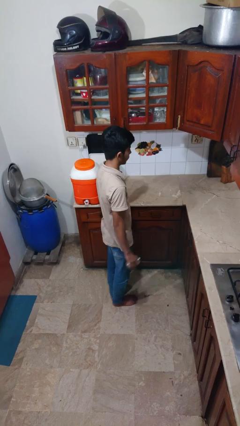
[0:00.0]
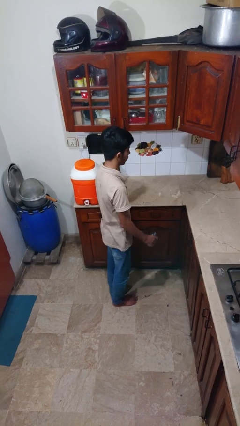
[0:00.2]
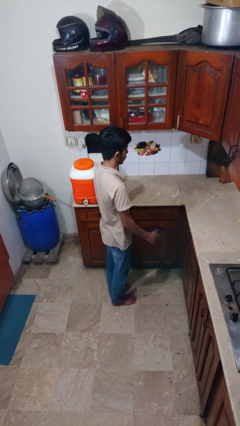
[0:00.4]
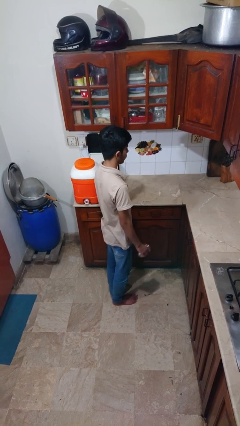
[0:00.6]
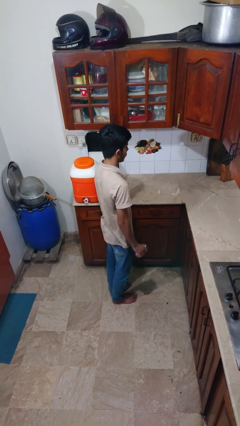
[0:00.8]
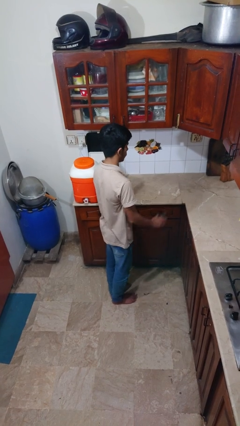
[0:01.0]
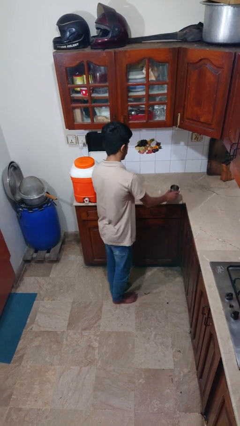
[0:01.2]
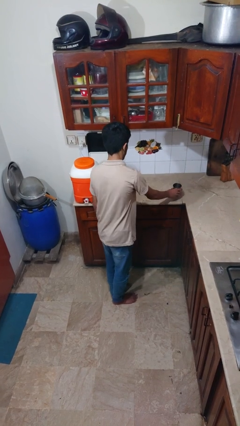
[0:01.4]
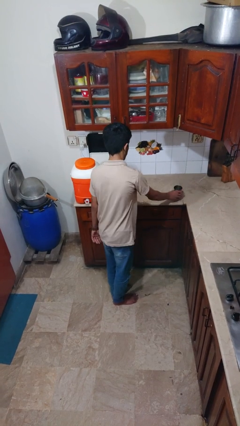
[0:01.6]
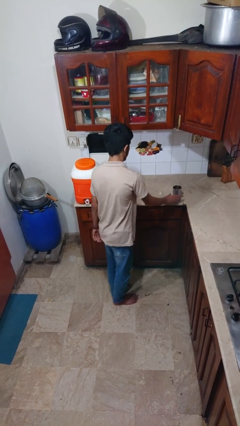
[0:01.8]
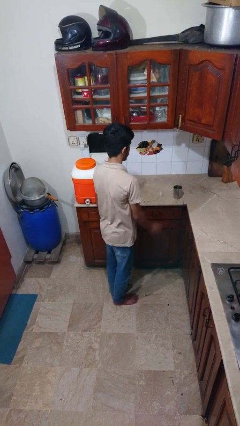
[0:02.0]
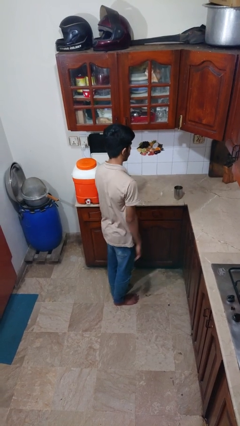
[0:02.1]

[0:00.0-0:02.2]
person puts down object on countertop

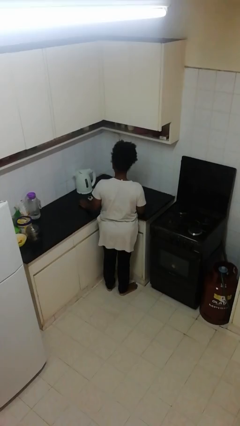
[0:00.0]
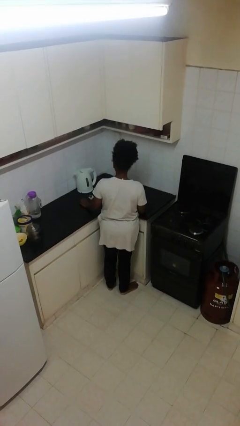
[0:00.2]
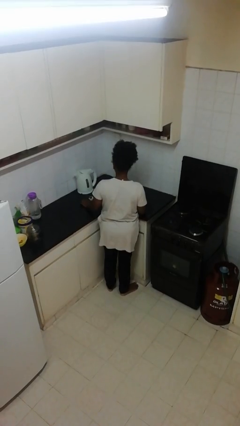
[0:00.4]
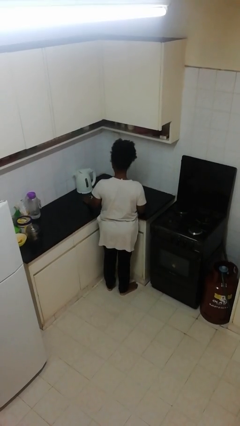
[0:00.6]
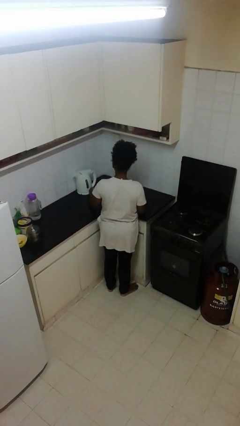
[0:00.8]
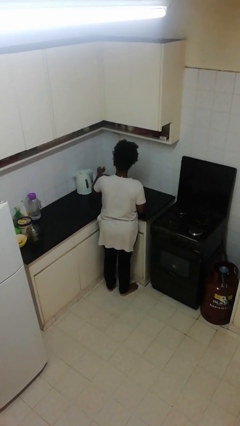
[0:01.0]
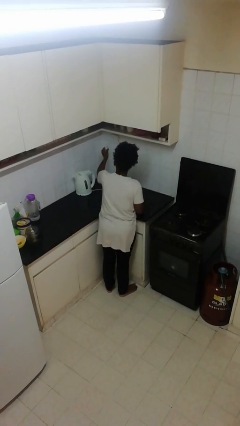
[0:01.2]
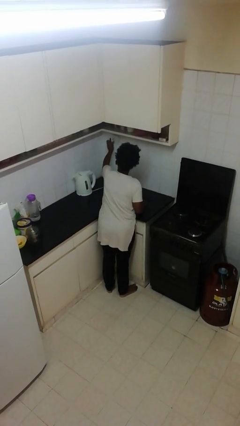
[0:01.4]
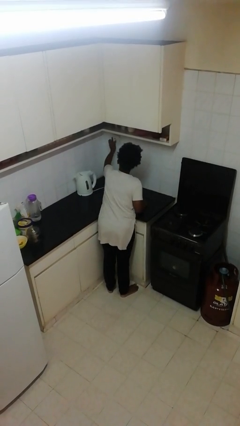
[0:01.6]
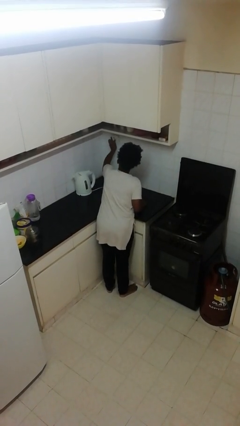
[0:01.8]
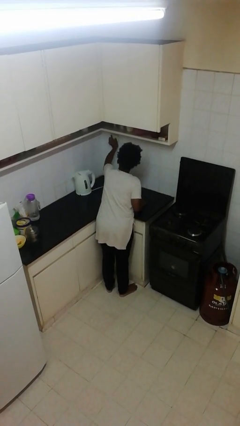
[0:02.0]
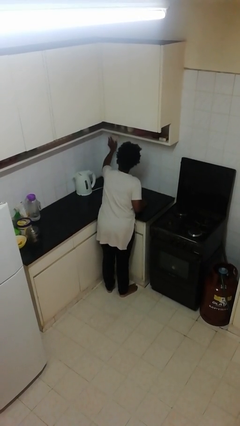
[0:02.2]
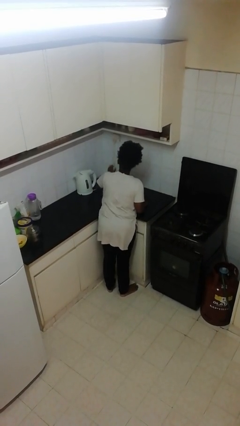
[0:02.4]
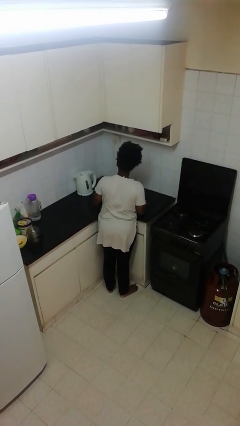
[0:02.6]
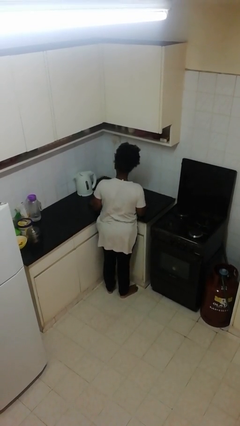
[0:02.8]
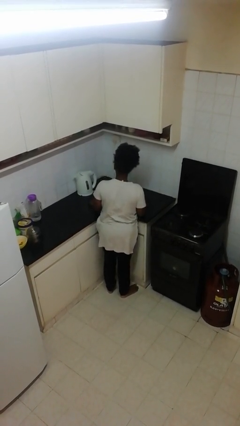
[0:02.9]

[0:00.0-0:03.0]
person plugs into electrical socket

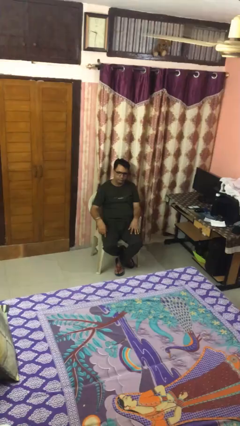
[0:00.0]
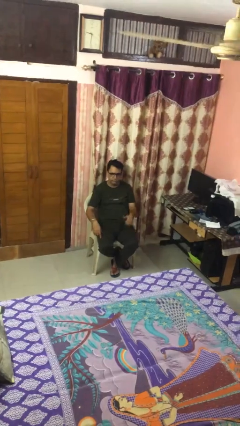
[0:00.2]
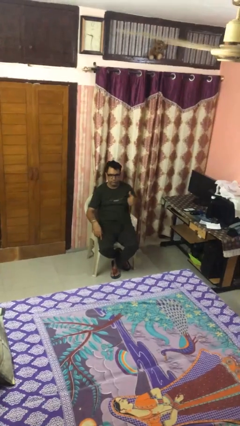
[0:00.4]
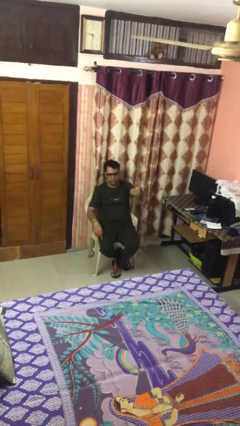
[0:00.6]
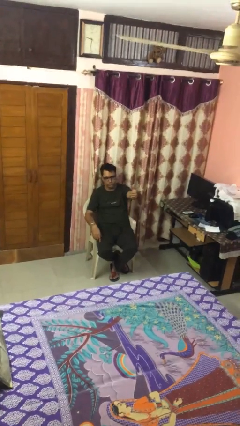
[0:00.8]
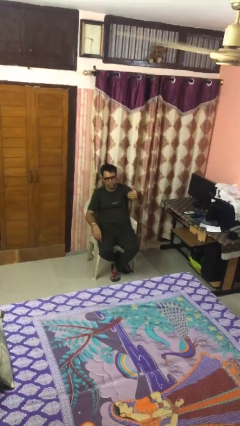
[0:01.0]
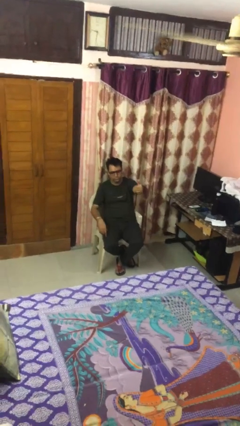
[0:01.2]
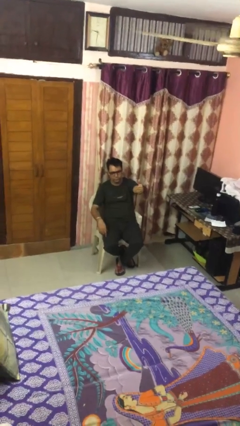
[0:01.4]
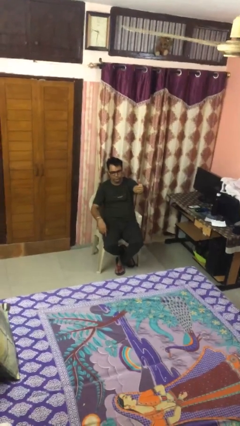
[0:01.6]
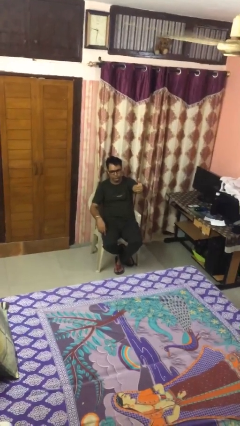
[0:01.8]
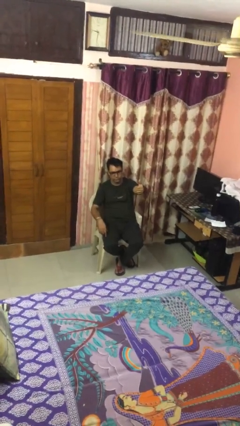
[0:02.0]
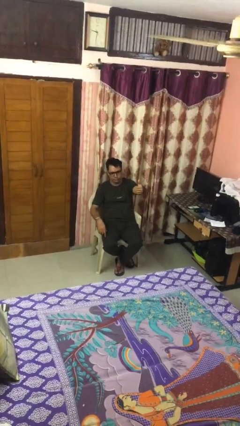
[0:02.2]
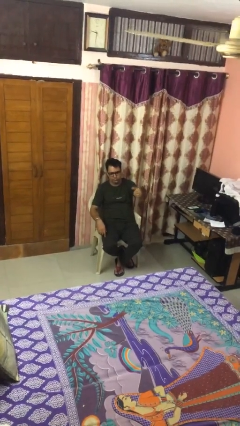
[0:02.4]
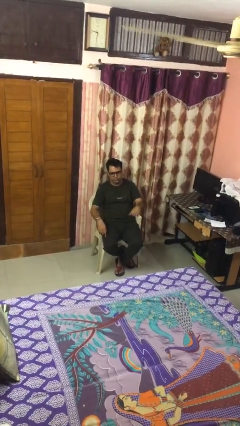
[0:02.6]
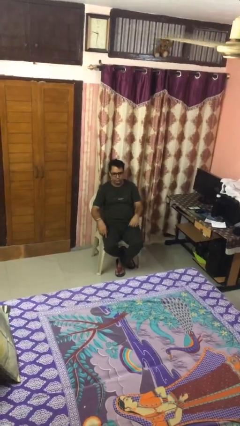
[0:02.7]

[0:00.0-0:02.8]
person gestures thumbs up

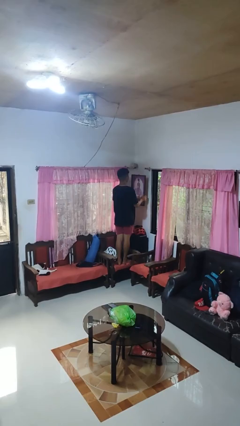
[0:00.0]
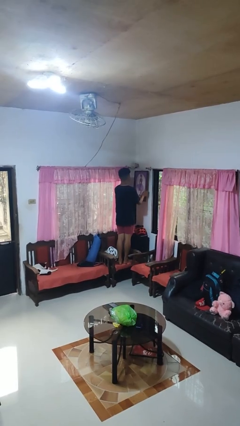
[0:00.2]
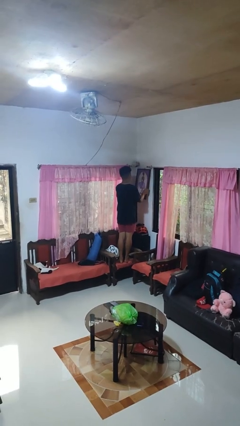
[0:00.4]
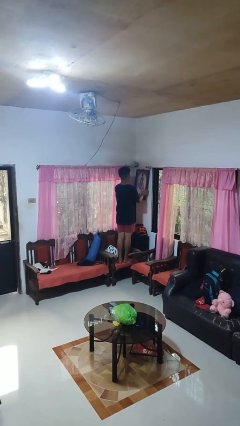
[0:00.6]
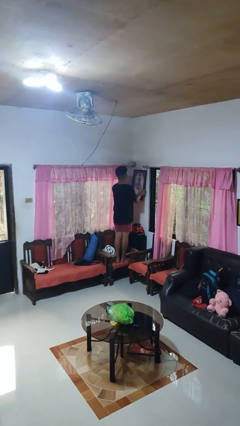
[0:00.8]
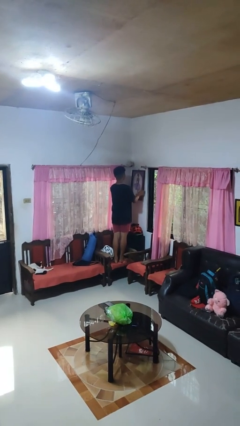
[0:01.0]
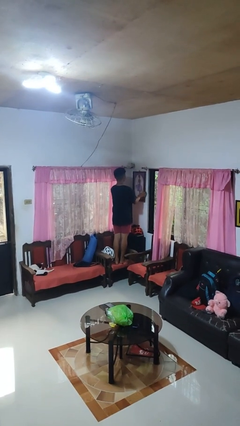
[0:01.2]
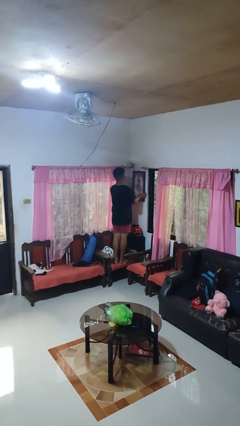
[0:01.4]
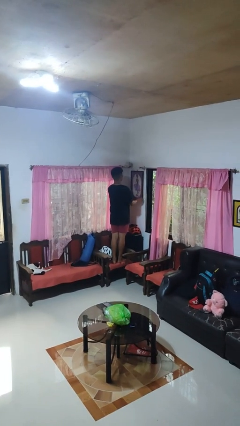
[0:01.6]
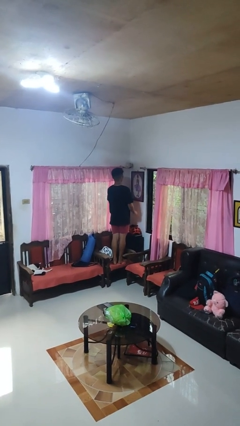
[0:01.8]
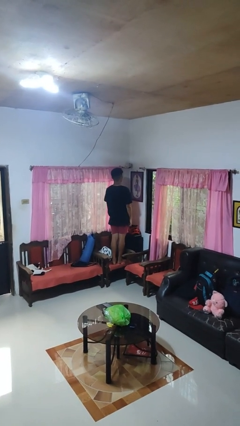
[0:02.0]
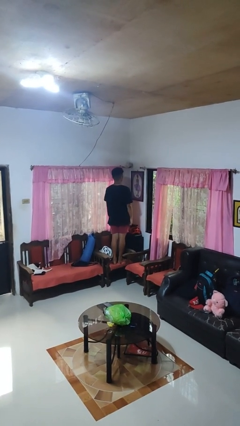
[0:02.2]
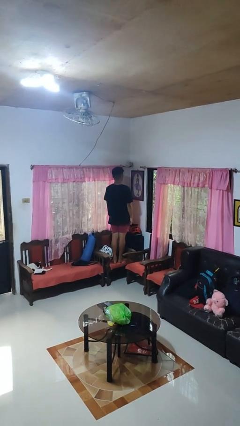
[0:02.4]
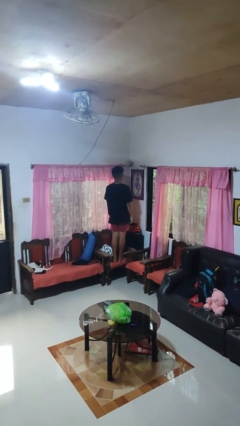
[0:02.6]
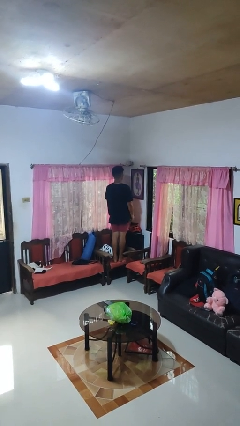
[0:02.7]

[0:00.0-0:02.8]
person puts up picture frame

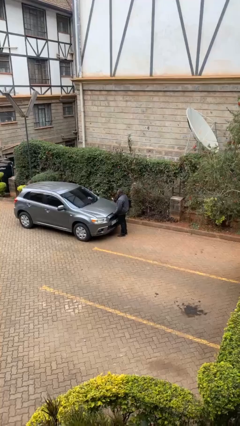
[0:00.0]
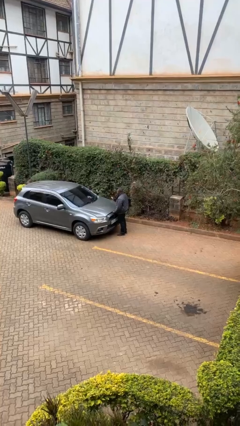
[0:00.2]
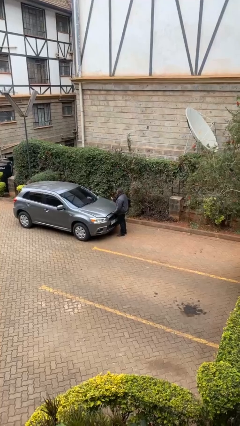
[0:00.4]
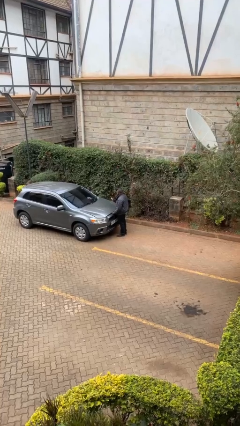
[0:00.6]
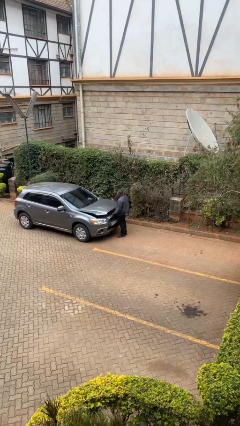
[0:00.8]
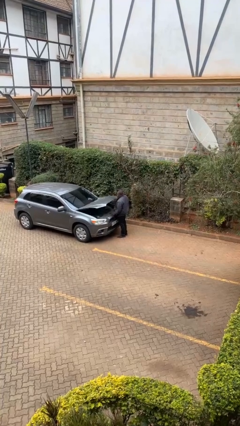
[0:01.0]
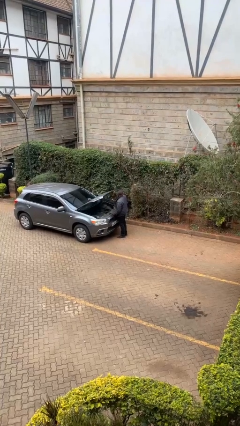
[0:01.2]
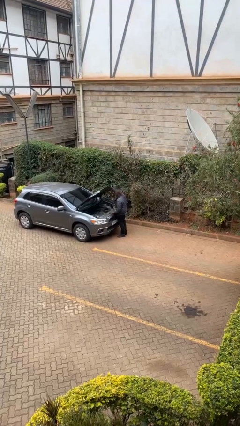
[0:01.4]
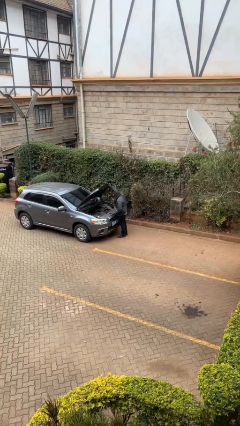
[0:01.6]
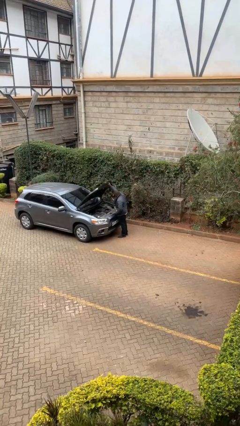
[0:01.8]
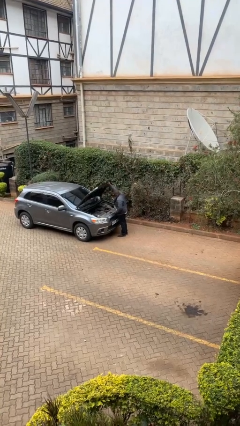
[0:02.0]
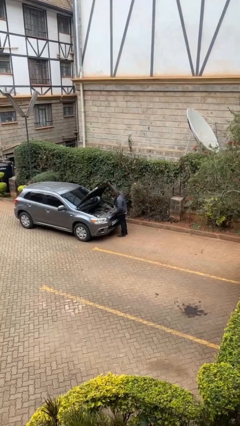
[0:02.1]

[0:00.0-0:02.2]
person opens car hood

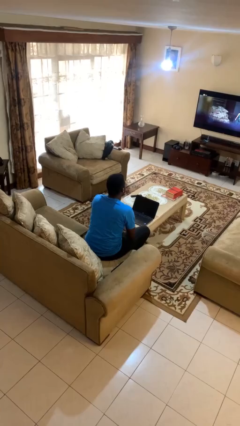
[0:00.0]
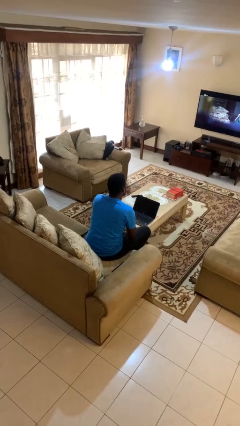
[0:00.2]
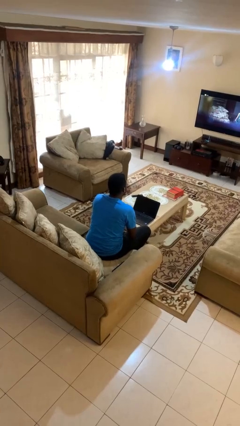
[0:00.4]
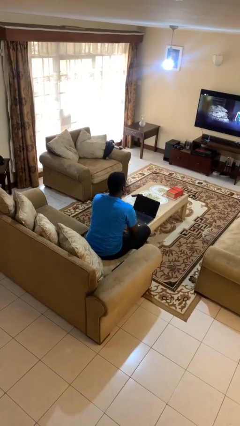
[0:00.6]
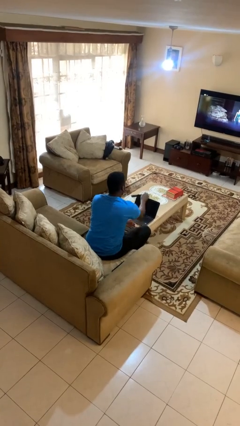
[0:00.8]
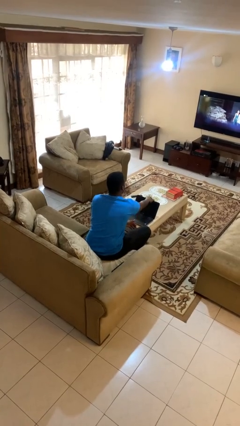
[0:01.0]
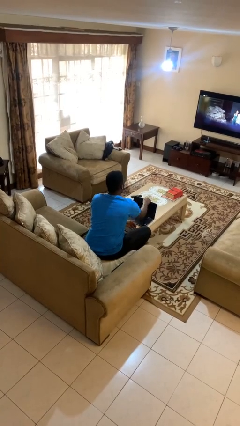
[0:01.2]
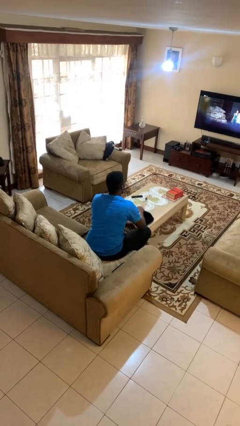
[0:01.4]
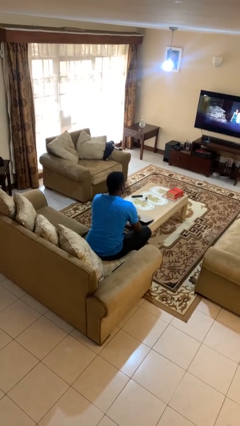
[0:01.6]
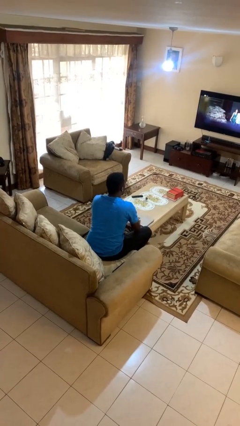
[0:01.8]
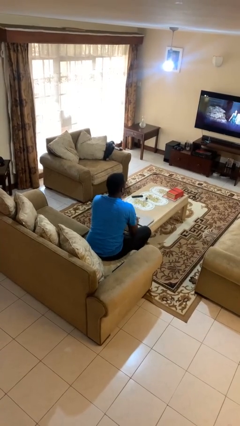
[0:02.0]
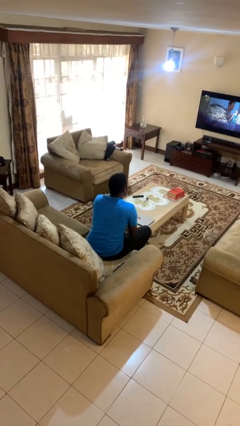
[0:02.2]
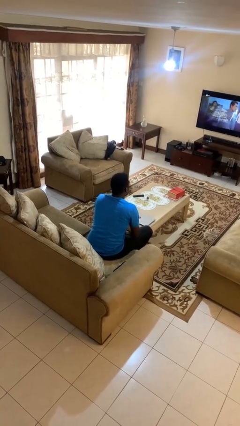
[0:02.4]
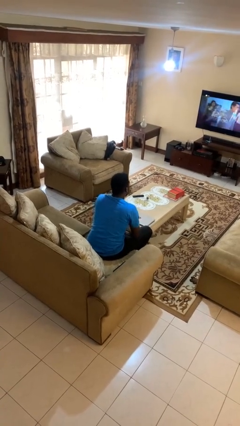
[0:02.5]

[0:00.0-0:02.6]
person closes laptop

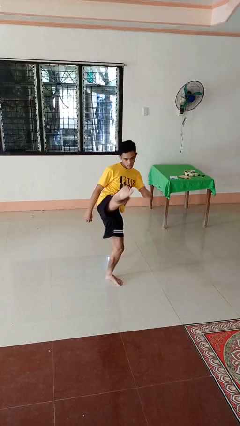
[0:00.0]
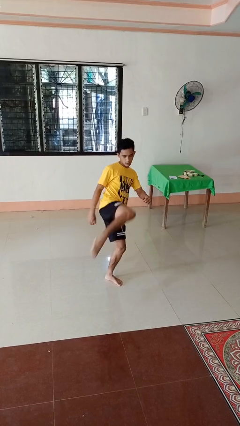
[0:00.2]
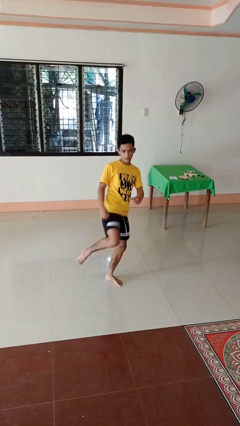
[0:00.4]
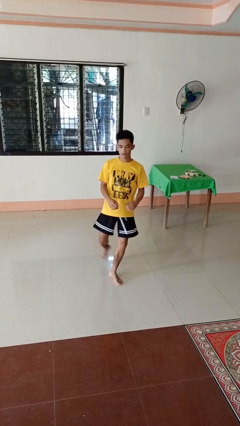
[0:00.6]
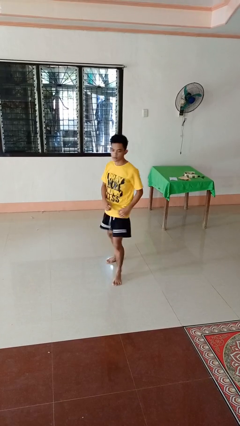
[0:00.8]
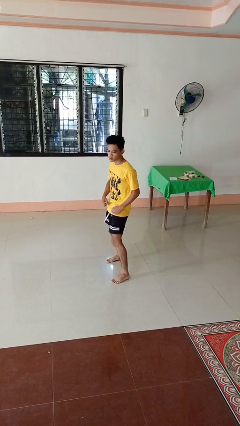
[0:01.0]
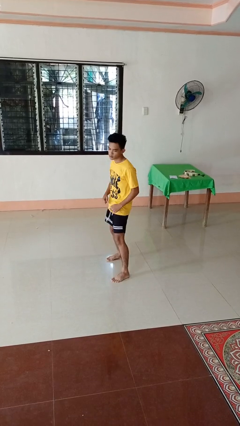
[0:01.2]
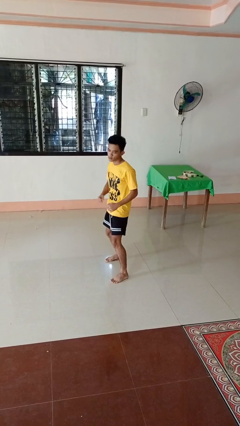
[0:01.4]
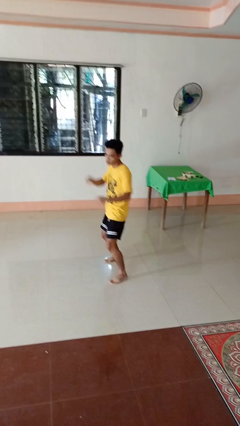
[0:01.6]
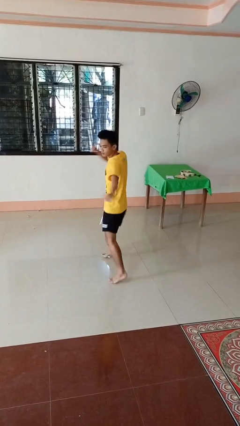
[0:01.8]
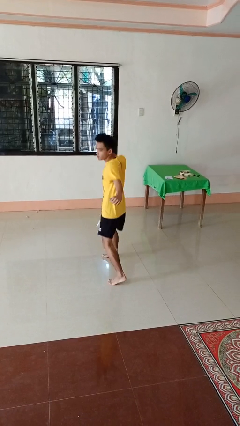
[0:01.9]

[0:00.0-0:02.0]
person karate kicks
